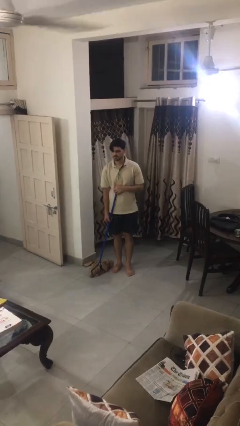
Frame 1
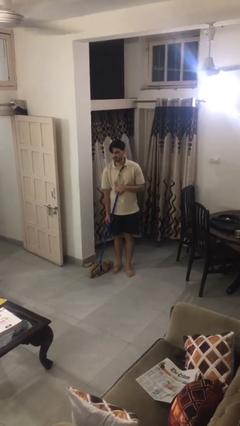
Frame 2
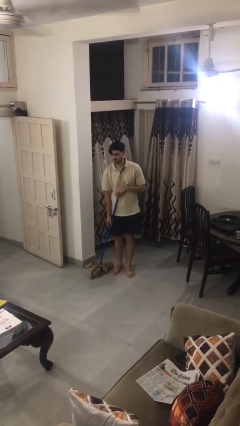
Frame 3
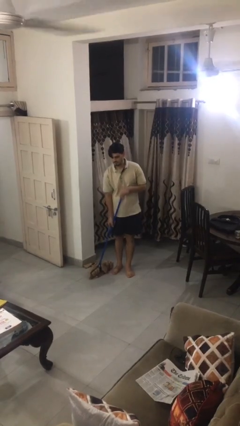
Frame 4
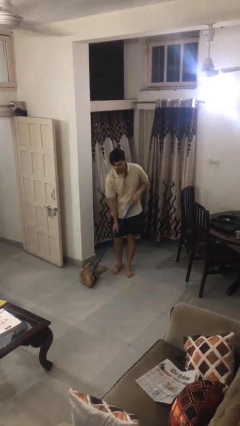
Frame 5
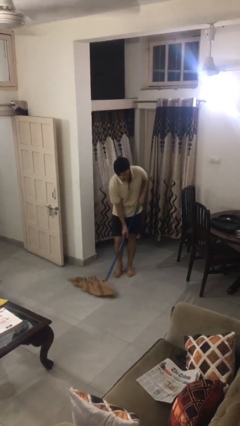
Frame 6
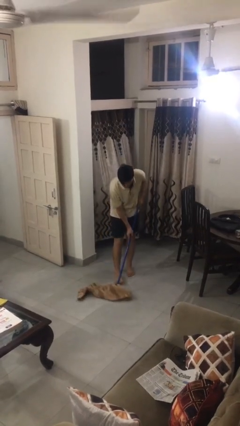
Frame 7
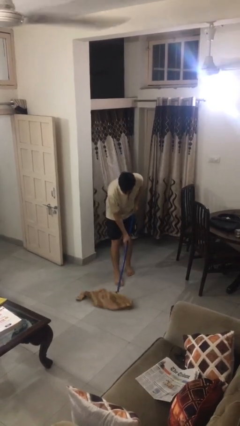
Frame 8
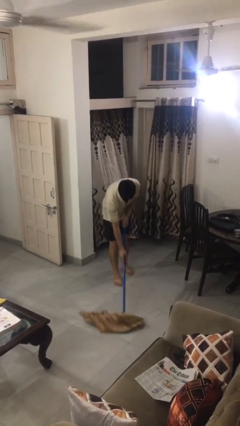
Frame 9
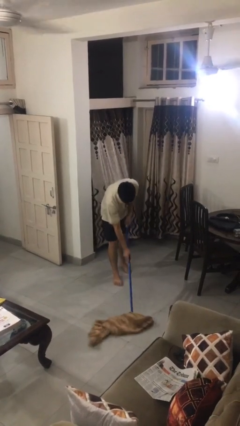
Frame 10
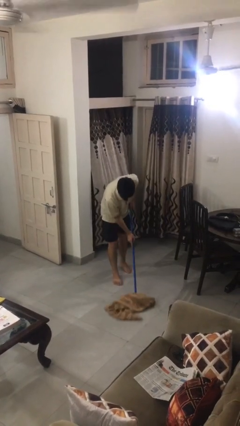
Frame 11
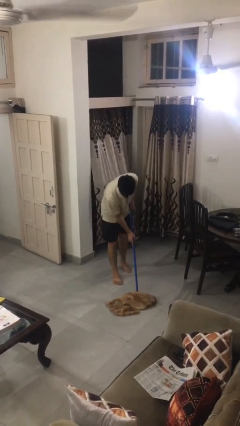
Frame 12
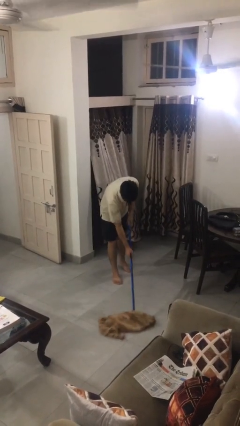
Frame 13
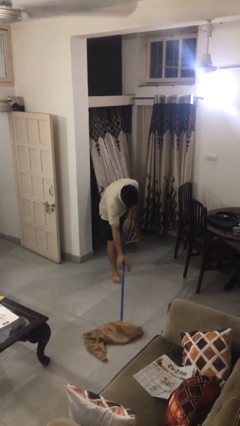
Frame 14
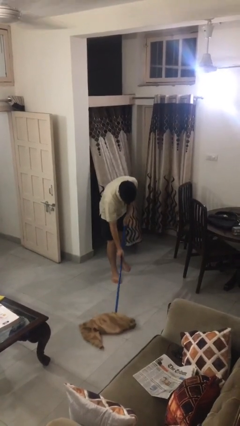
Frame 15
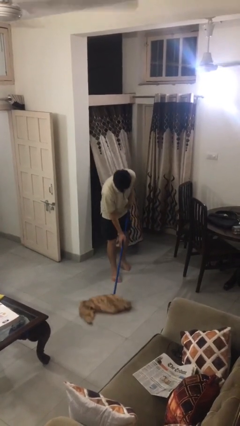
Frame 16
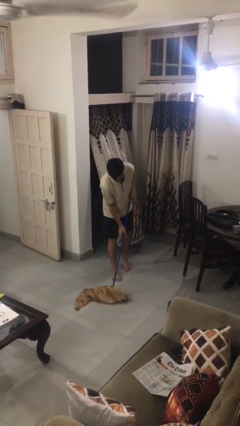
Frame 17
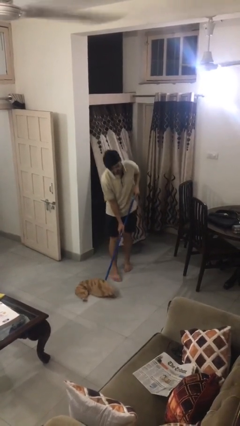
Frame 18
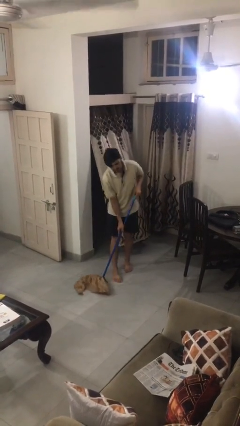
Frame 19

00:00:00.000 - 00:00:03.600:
person mops

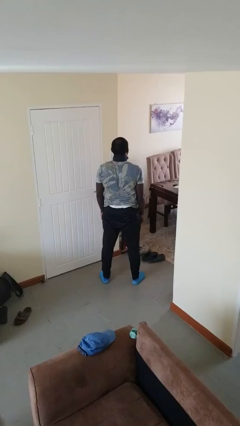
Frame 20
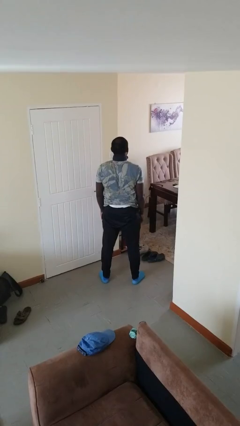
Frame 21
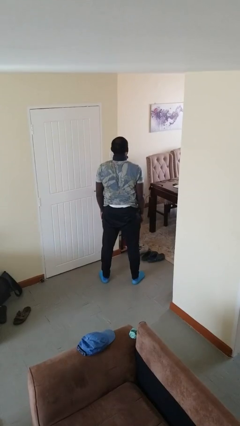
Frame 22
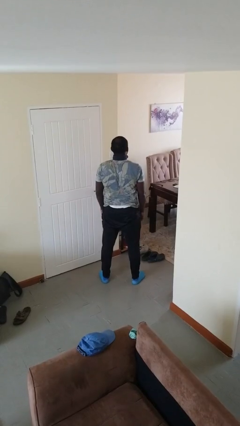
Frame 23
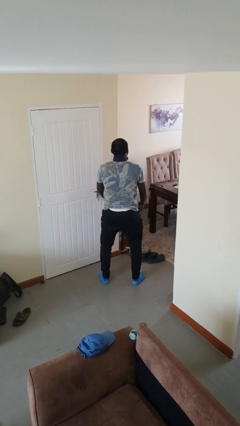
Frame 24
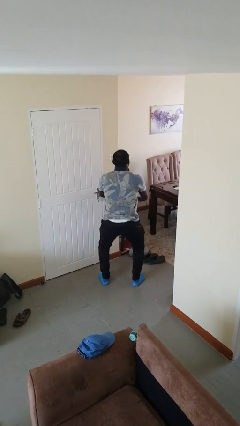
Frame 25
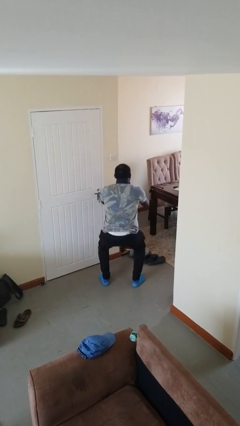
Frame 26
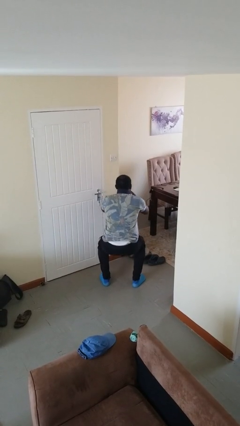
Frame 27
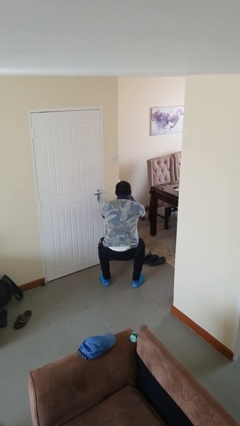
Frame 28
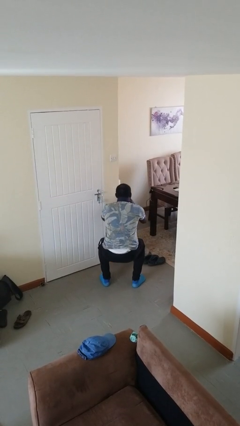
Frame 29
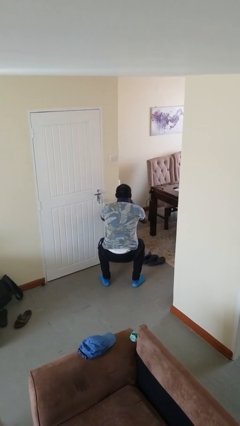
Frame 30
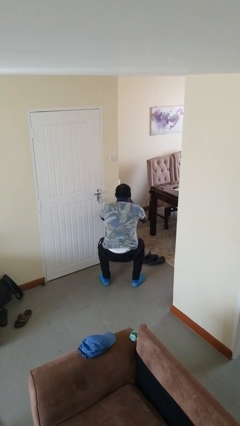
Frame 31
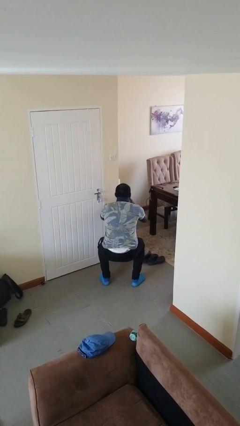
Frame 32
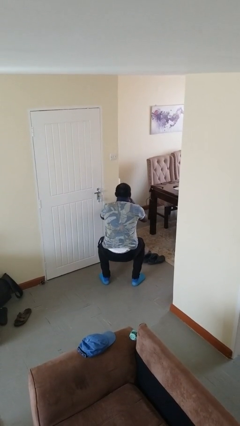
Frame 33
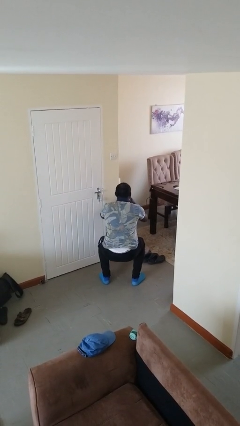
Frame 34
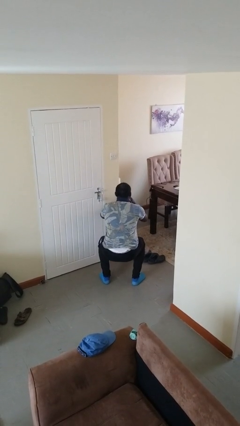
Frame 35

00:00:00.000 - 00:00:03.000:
person squats

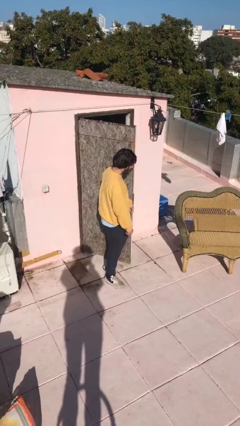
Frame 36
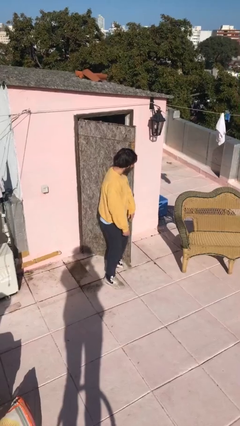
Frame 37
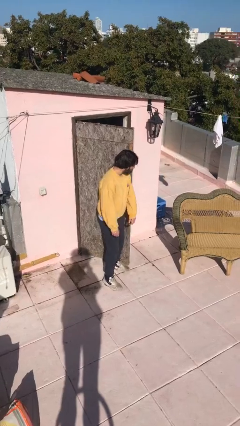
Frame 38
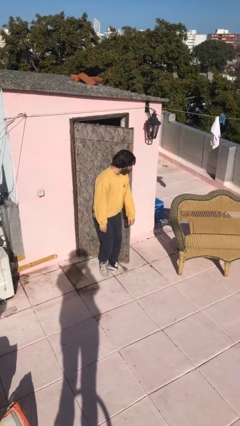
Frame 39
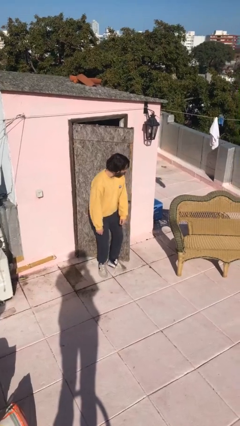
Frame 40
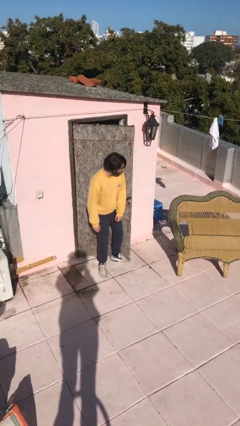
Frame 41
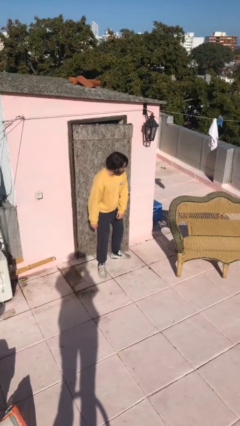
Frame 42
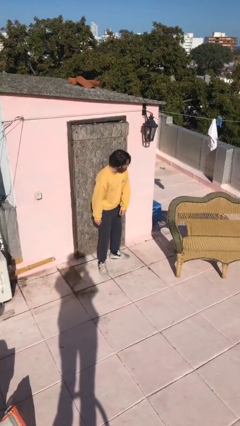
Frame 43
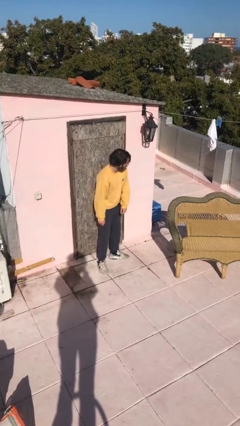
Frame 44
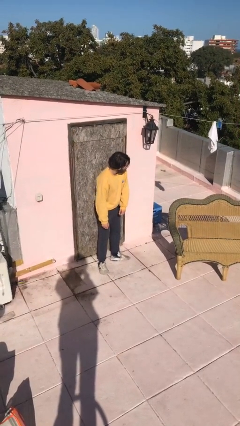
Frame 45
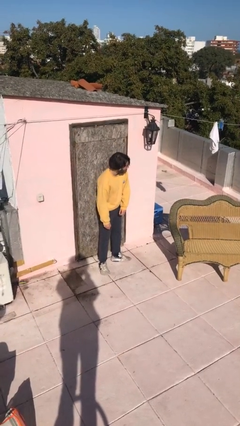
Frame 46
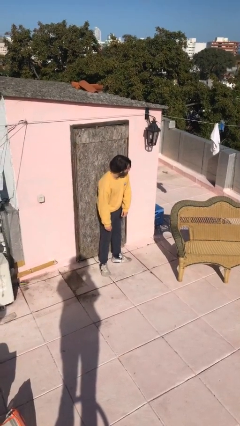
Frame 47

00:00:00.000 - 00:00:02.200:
person closes door with hip

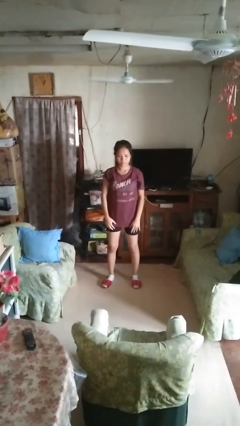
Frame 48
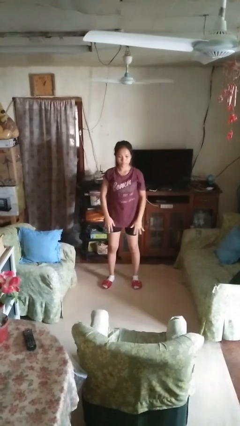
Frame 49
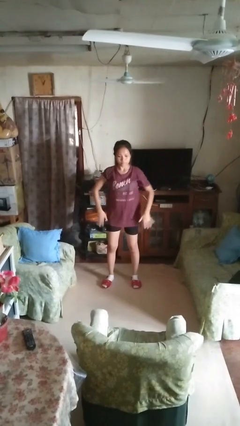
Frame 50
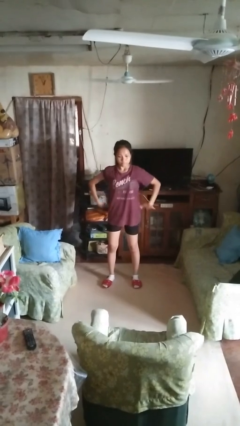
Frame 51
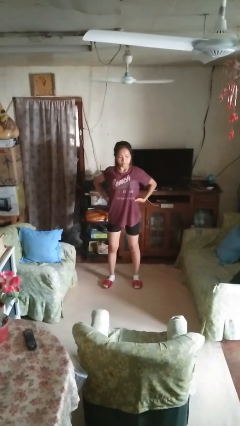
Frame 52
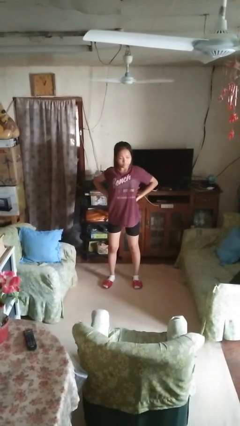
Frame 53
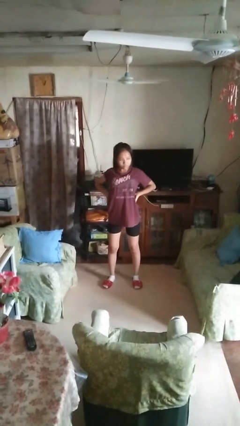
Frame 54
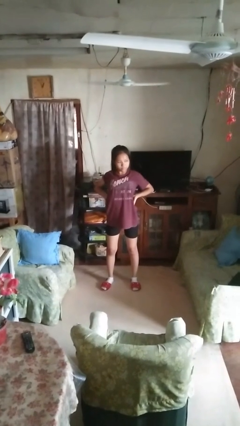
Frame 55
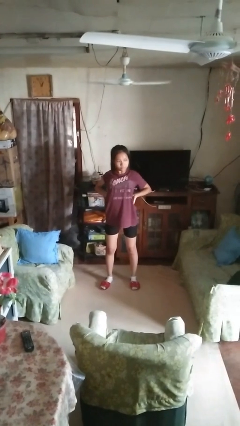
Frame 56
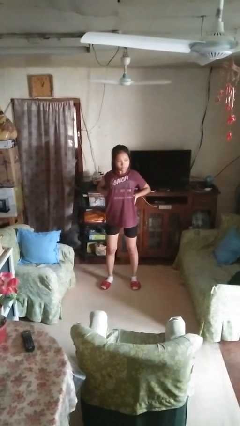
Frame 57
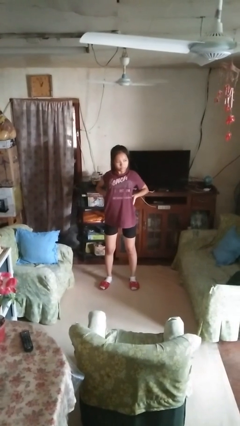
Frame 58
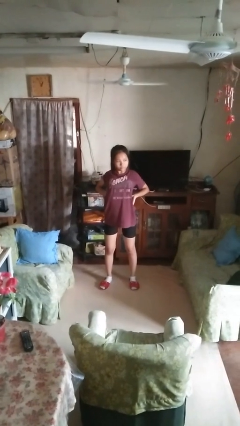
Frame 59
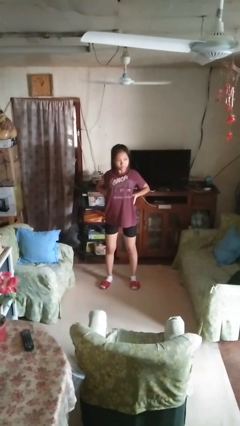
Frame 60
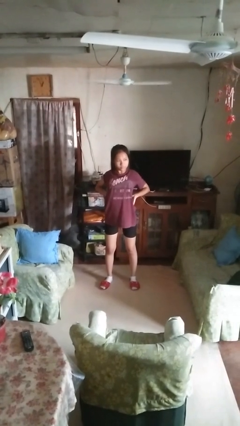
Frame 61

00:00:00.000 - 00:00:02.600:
person stretches back

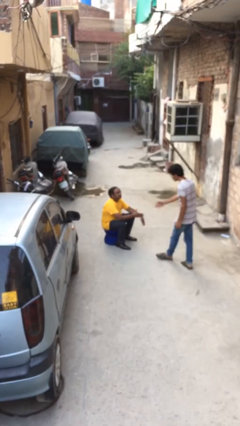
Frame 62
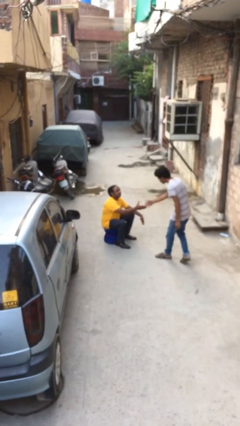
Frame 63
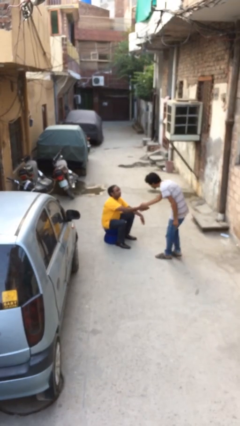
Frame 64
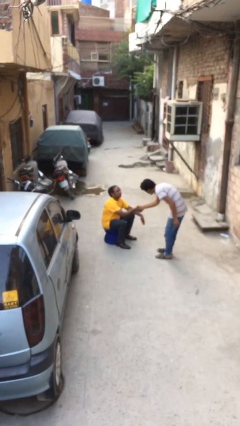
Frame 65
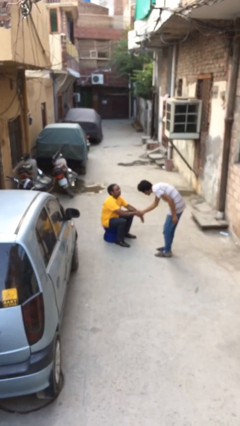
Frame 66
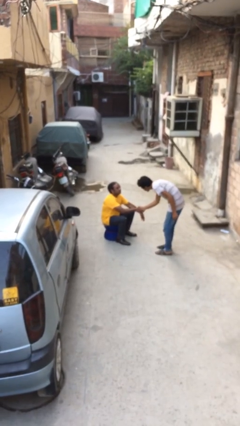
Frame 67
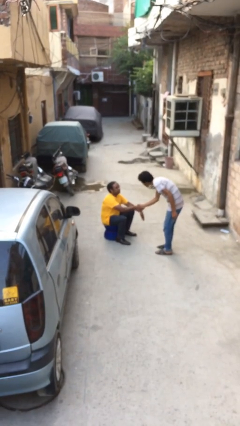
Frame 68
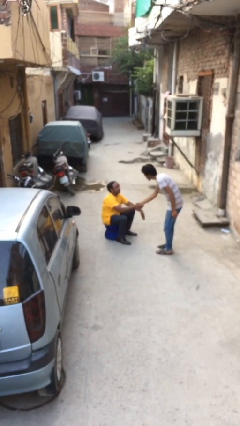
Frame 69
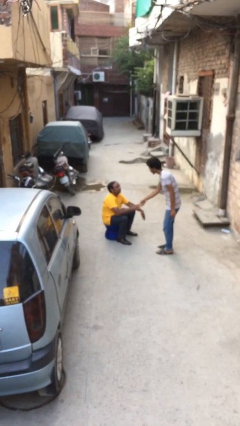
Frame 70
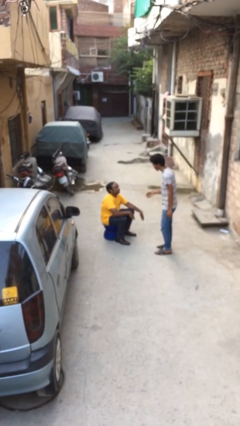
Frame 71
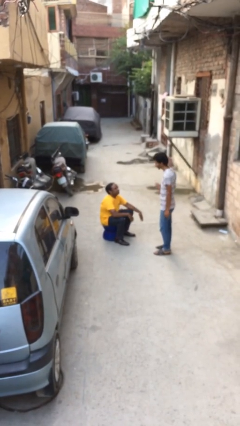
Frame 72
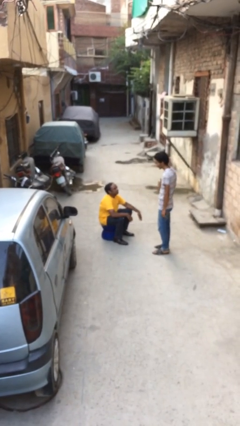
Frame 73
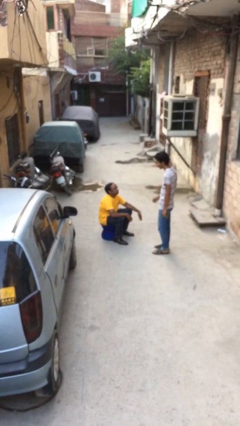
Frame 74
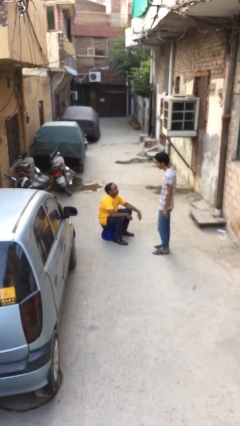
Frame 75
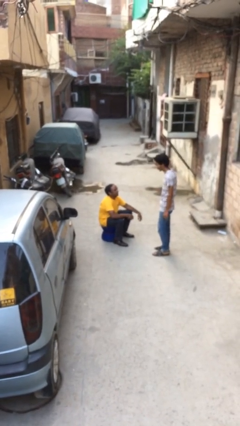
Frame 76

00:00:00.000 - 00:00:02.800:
person shakes hand

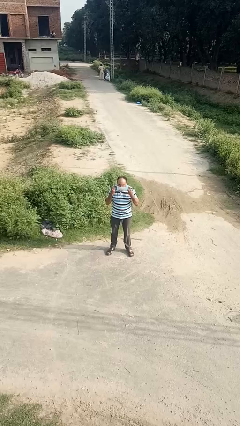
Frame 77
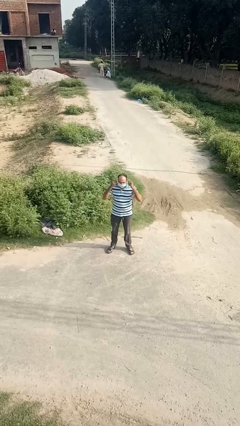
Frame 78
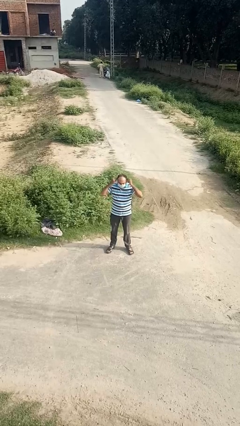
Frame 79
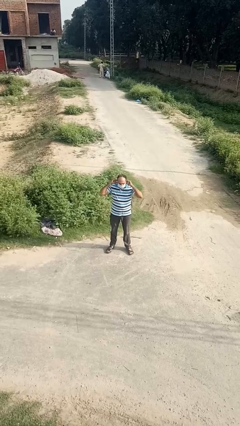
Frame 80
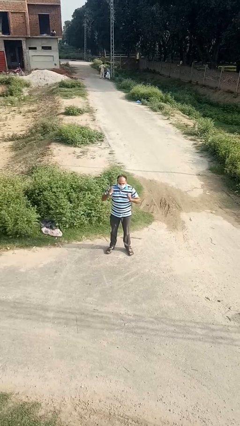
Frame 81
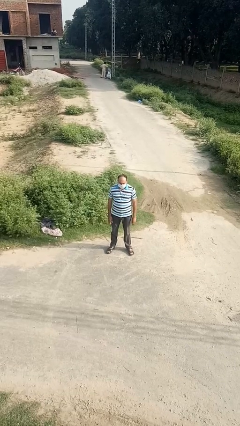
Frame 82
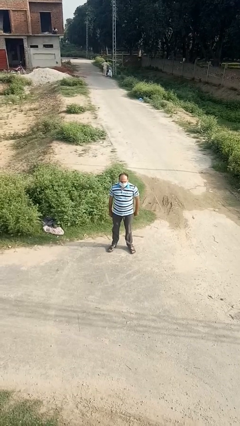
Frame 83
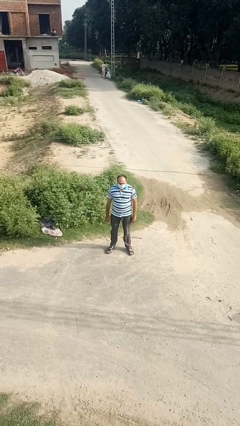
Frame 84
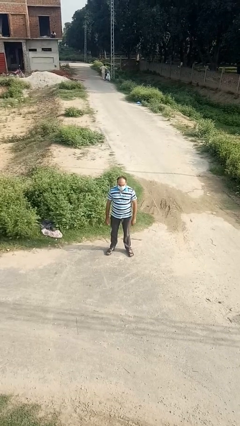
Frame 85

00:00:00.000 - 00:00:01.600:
person puts on facemask

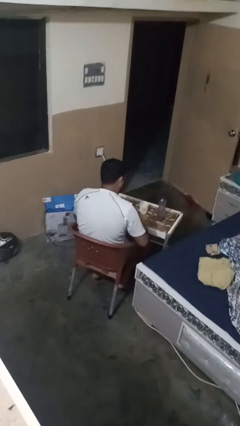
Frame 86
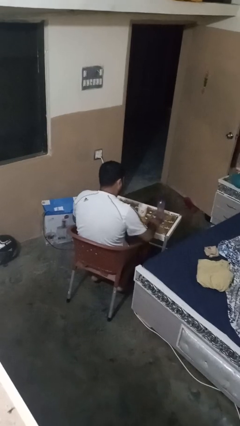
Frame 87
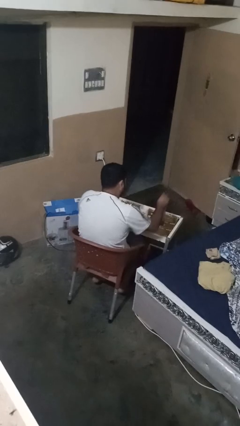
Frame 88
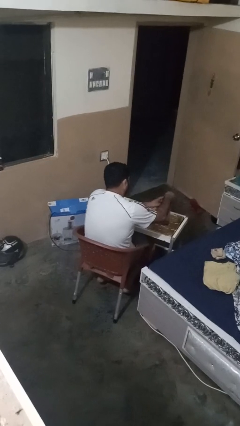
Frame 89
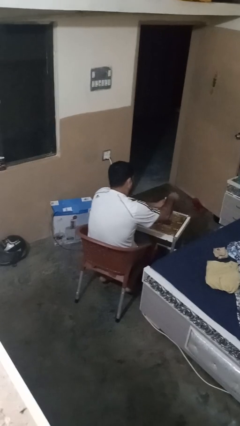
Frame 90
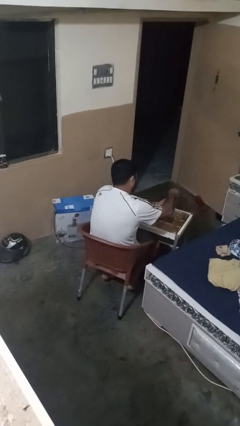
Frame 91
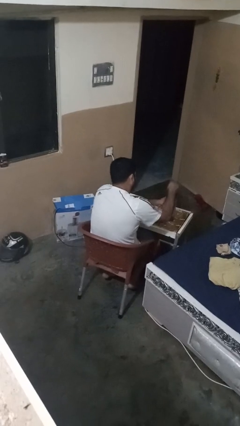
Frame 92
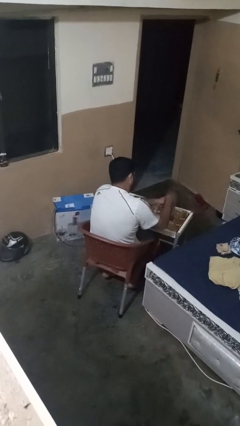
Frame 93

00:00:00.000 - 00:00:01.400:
person unscrews lid from bottle
